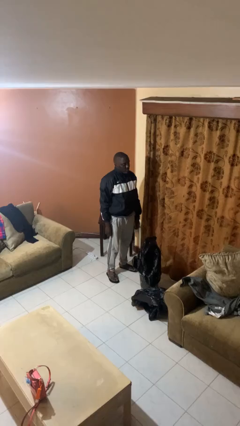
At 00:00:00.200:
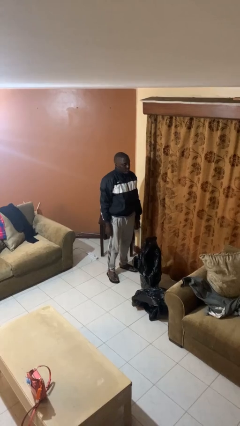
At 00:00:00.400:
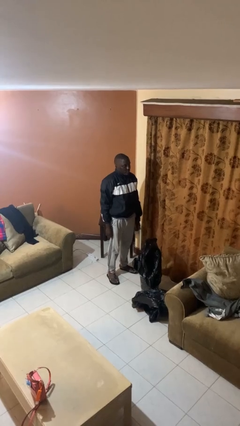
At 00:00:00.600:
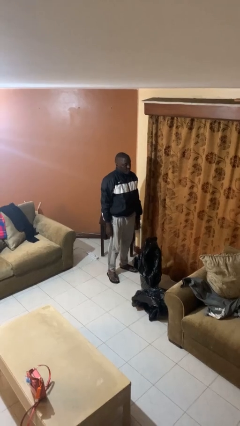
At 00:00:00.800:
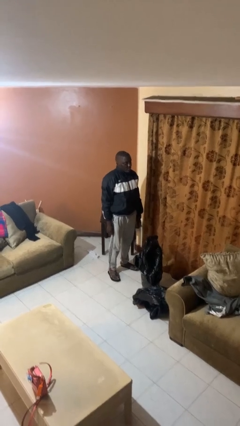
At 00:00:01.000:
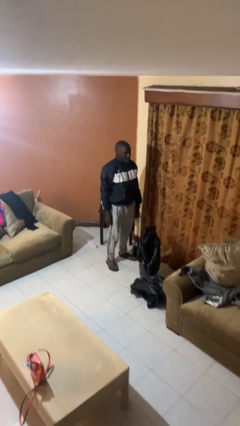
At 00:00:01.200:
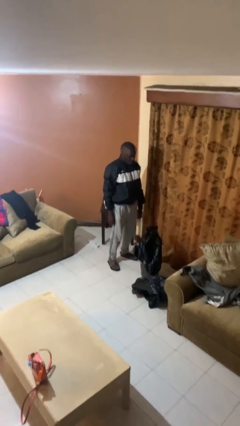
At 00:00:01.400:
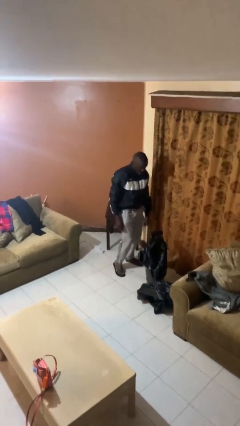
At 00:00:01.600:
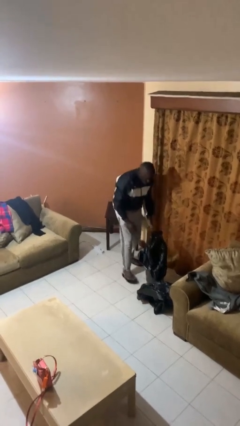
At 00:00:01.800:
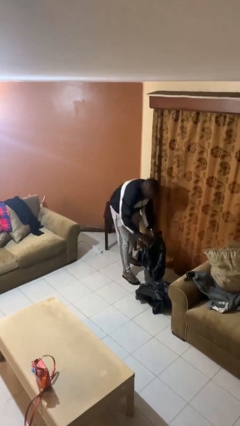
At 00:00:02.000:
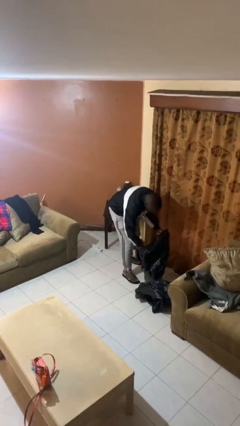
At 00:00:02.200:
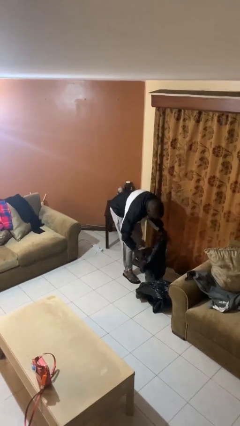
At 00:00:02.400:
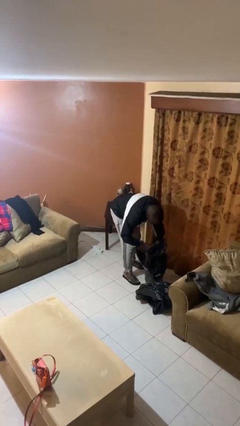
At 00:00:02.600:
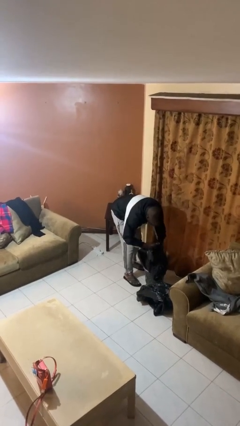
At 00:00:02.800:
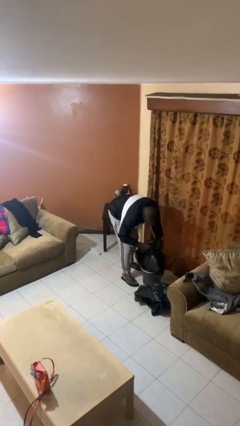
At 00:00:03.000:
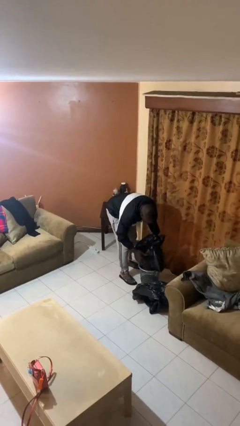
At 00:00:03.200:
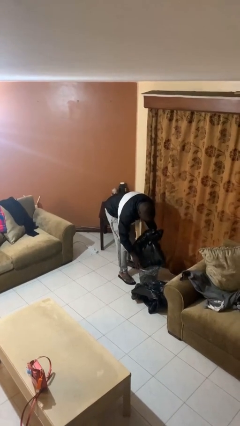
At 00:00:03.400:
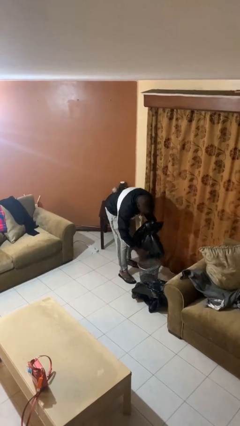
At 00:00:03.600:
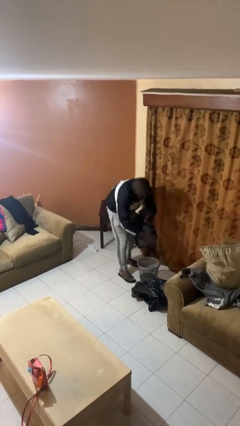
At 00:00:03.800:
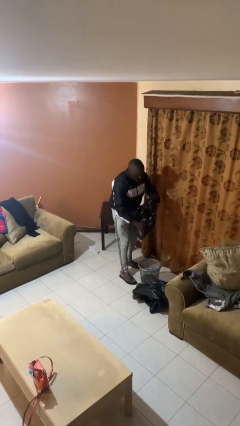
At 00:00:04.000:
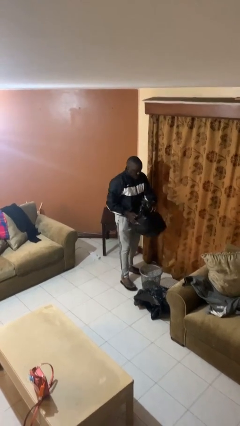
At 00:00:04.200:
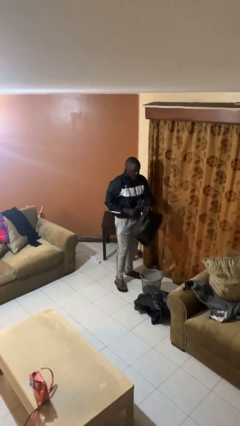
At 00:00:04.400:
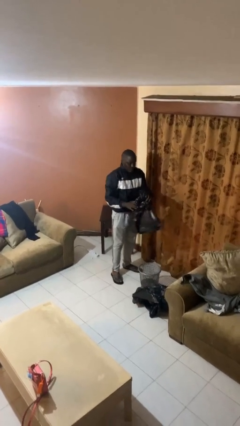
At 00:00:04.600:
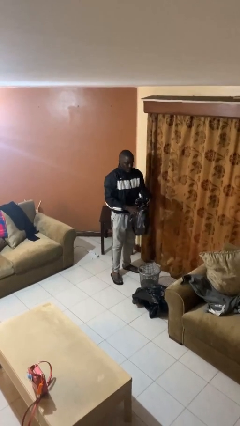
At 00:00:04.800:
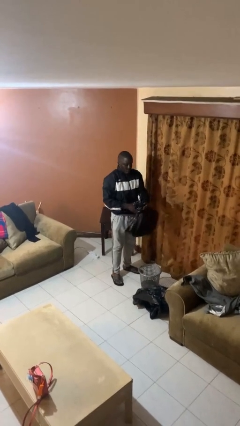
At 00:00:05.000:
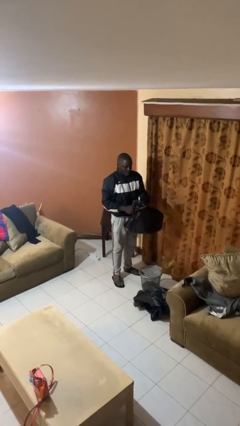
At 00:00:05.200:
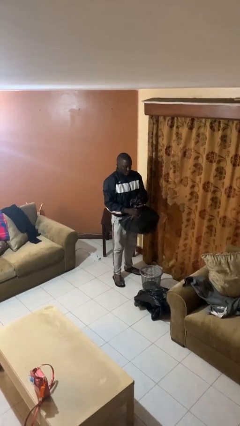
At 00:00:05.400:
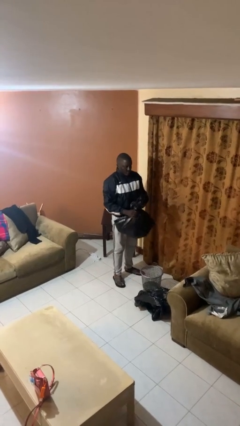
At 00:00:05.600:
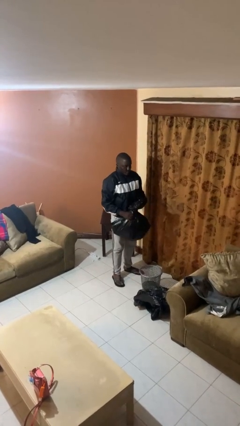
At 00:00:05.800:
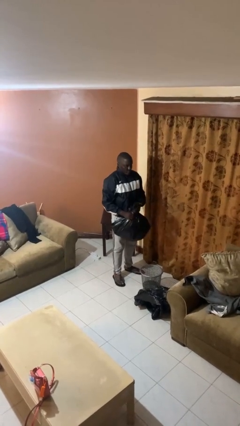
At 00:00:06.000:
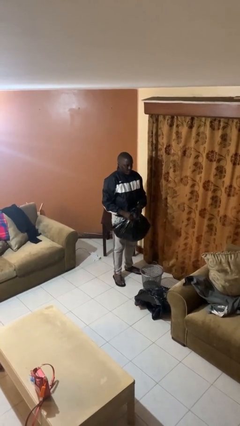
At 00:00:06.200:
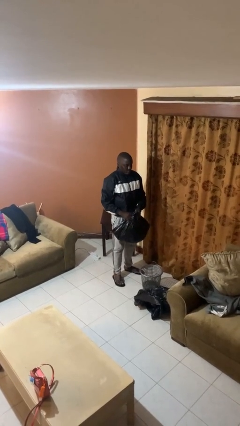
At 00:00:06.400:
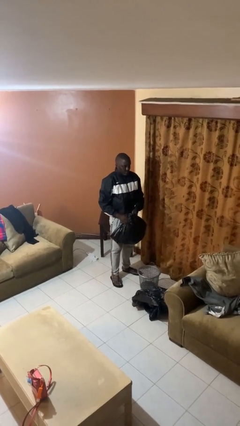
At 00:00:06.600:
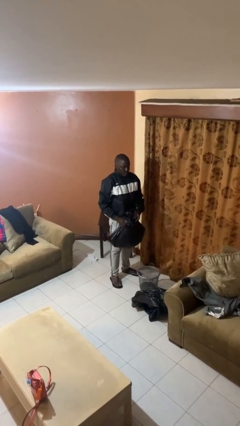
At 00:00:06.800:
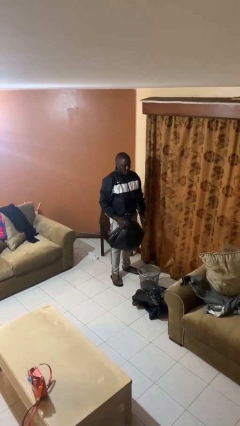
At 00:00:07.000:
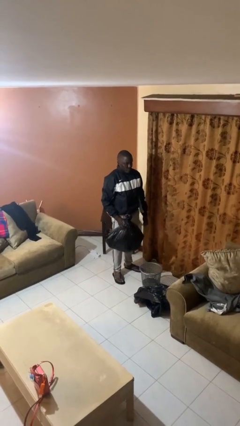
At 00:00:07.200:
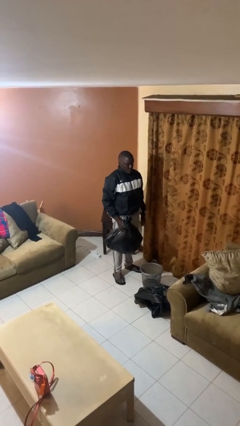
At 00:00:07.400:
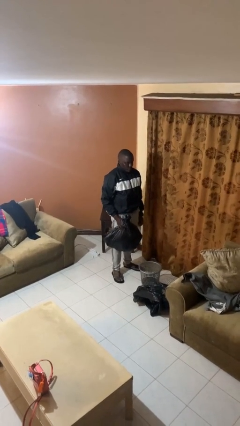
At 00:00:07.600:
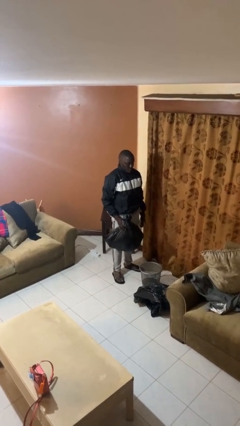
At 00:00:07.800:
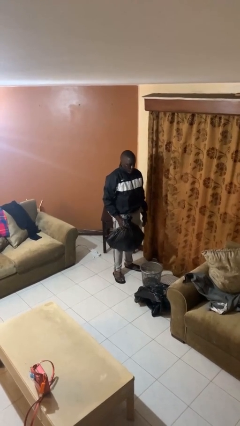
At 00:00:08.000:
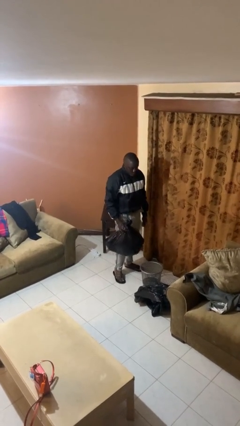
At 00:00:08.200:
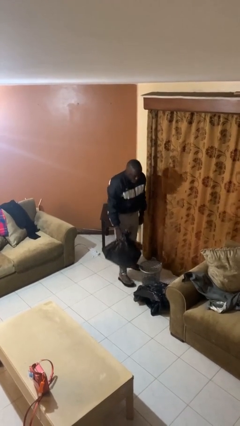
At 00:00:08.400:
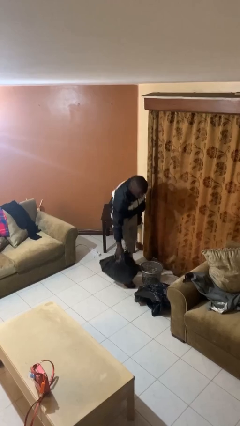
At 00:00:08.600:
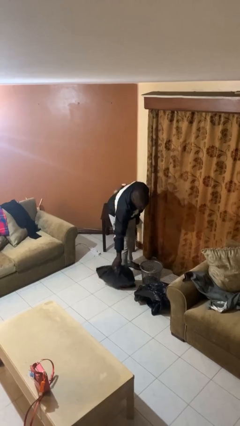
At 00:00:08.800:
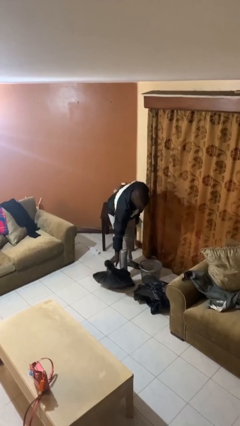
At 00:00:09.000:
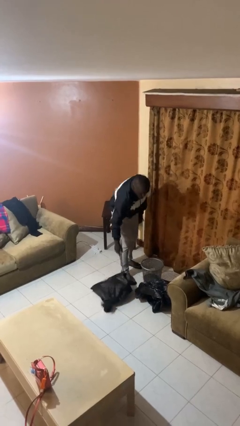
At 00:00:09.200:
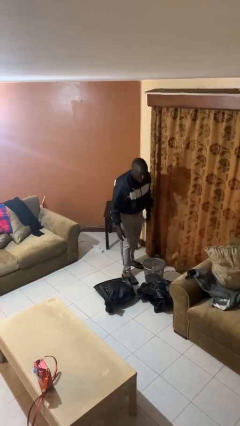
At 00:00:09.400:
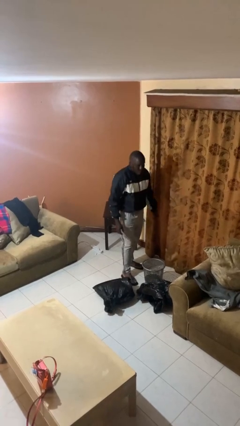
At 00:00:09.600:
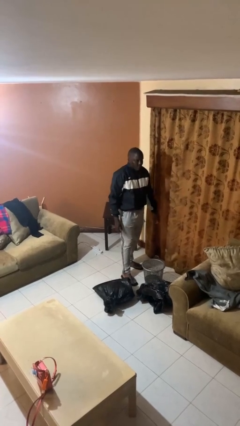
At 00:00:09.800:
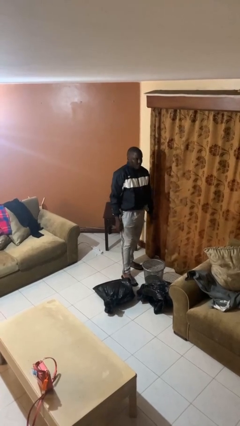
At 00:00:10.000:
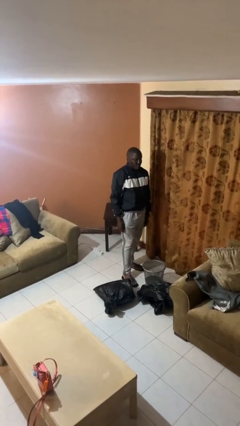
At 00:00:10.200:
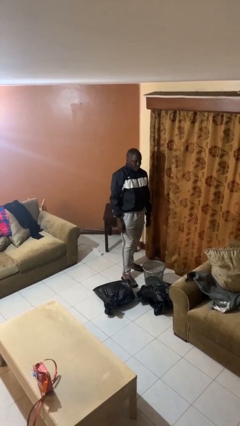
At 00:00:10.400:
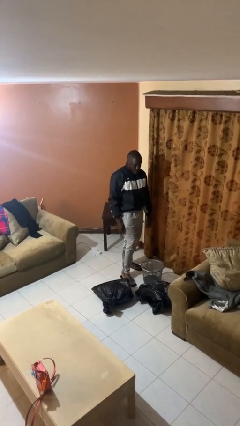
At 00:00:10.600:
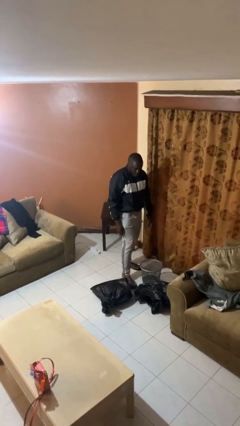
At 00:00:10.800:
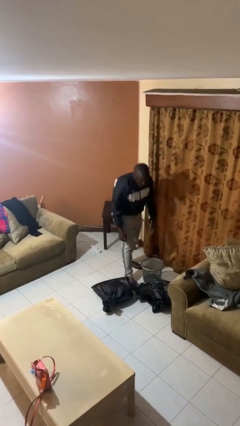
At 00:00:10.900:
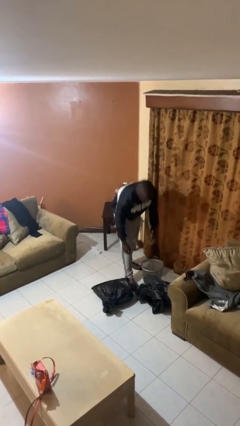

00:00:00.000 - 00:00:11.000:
person removes trashbag from trashcan

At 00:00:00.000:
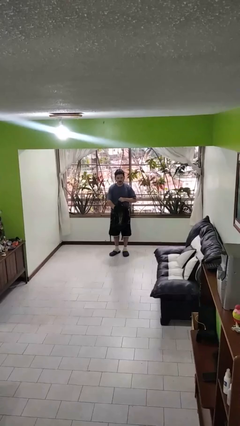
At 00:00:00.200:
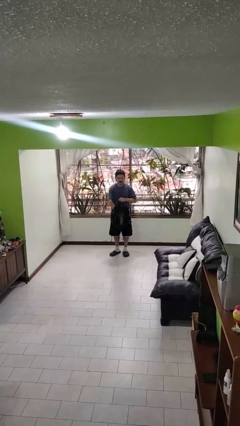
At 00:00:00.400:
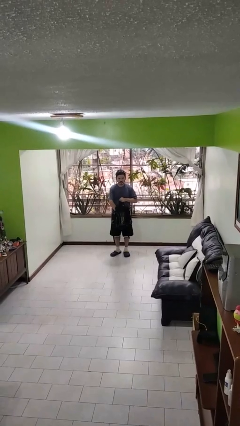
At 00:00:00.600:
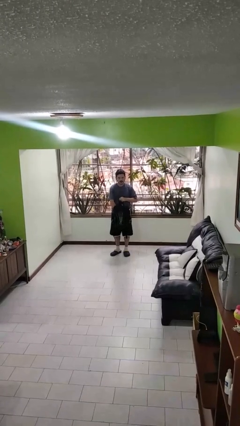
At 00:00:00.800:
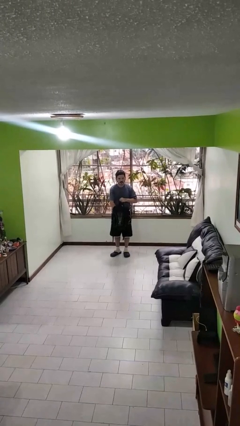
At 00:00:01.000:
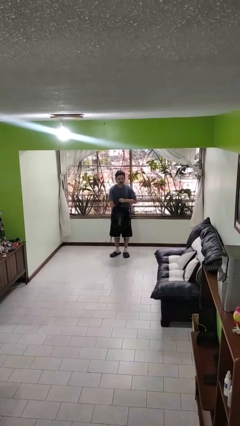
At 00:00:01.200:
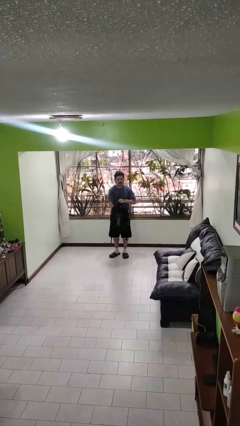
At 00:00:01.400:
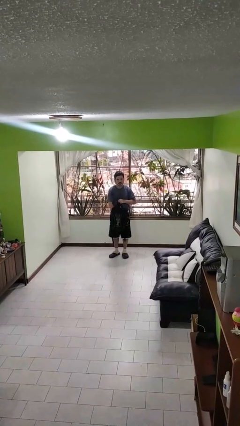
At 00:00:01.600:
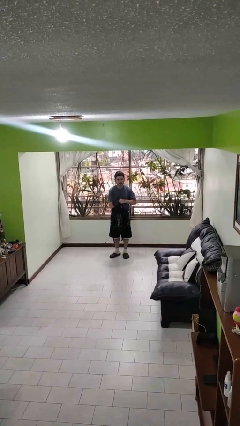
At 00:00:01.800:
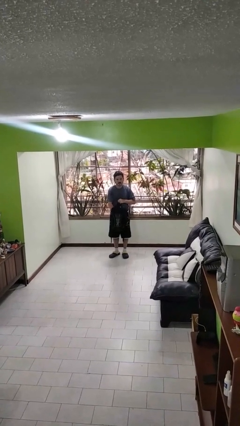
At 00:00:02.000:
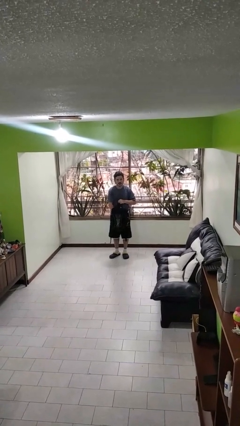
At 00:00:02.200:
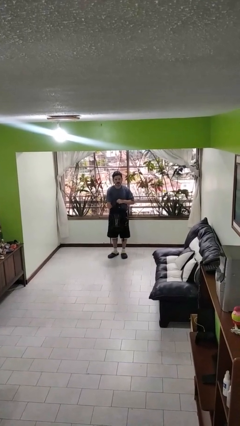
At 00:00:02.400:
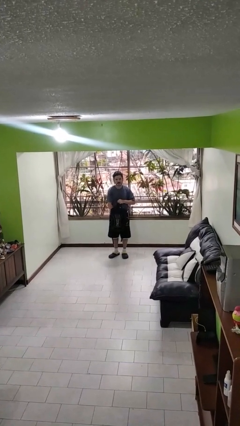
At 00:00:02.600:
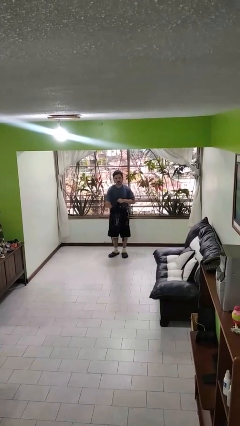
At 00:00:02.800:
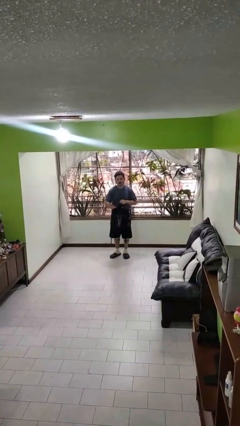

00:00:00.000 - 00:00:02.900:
person searches in backpack

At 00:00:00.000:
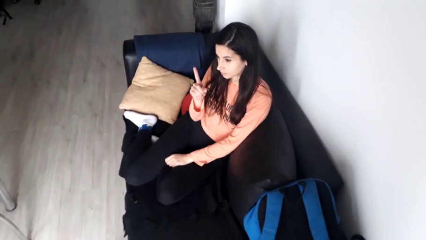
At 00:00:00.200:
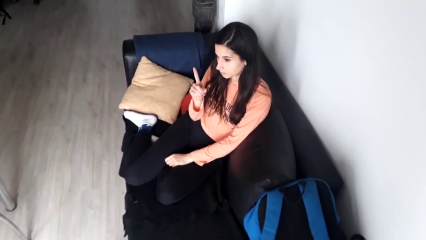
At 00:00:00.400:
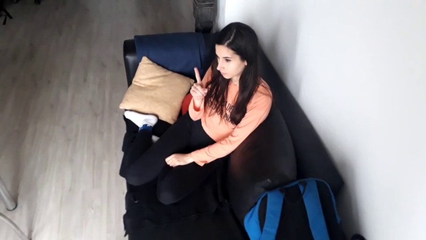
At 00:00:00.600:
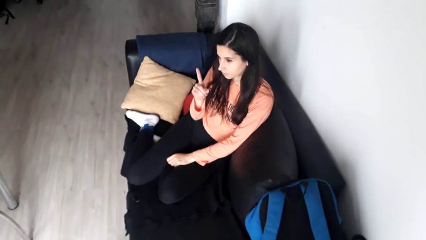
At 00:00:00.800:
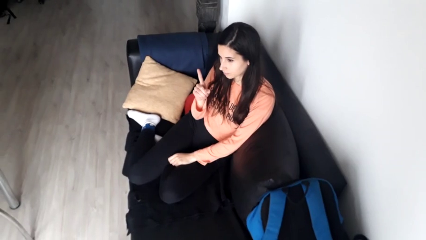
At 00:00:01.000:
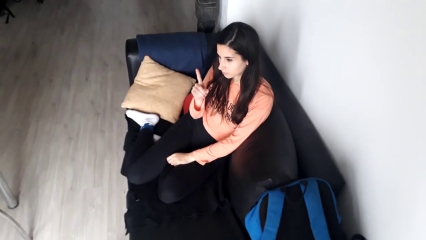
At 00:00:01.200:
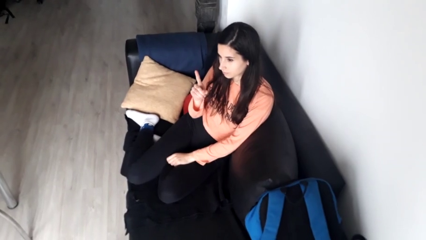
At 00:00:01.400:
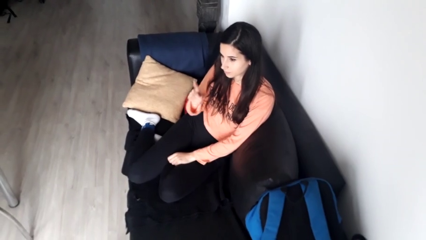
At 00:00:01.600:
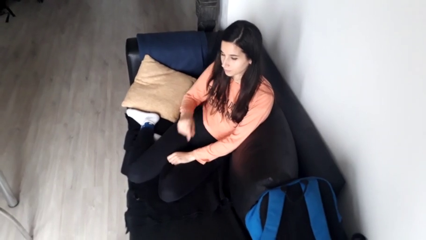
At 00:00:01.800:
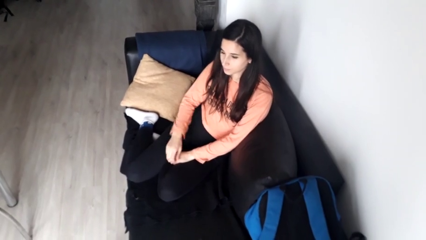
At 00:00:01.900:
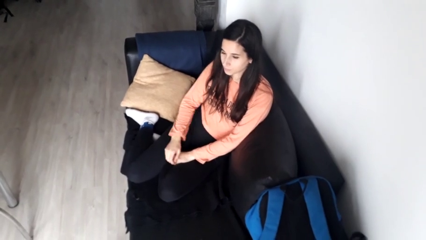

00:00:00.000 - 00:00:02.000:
person gestures number one

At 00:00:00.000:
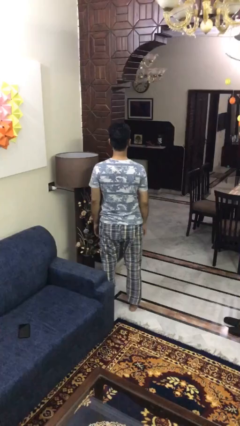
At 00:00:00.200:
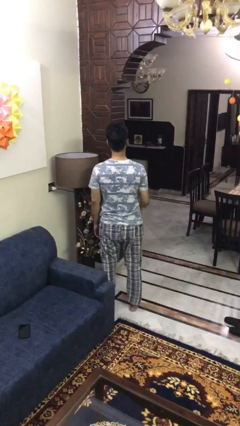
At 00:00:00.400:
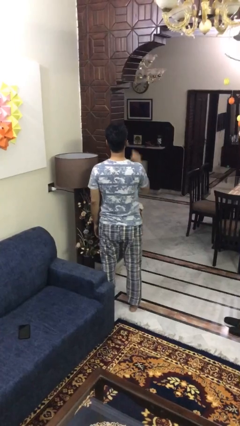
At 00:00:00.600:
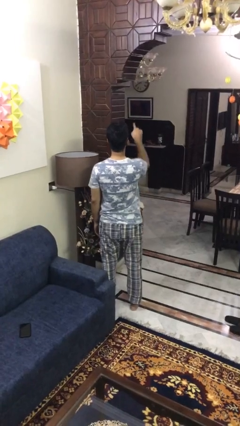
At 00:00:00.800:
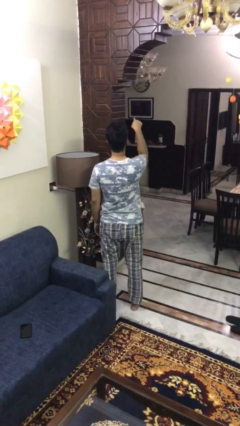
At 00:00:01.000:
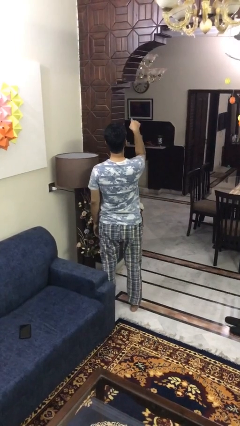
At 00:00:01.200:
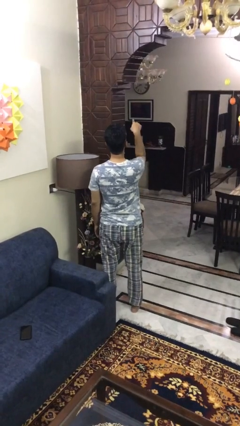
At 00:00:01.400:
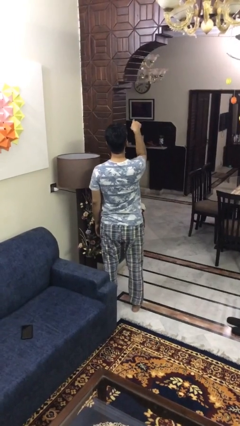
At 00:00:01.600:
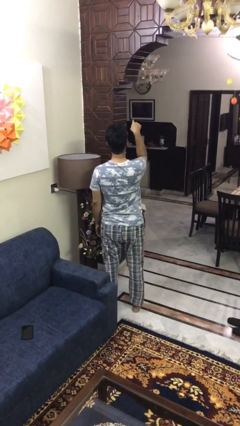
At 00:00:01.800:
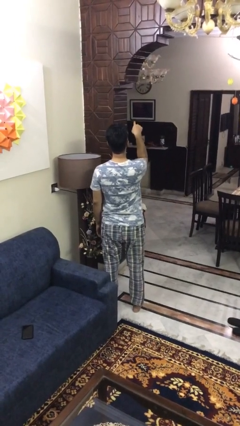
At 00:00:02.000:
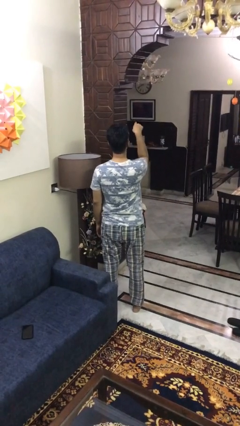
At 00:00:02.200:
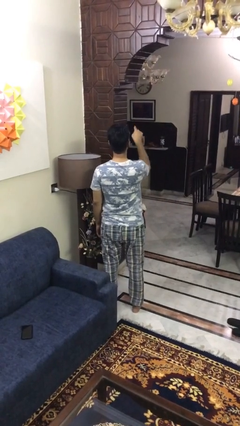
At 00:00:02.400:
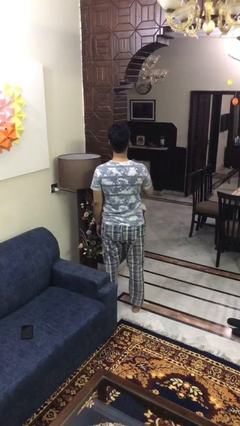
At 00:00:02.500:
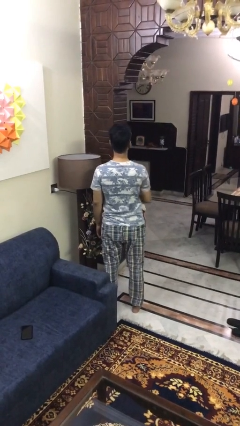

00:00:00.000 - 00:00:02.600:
person points at person
